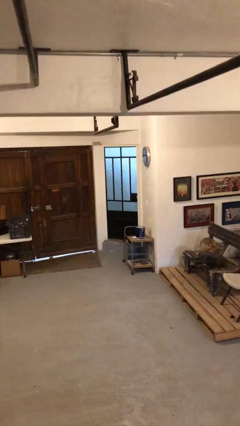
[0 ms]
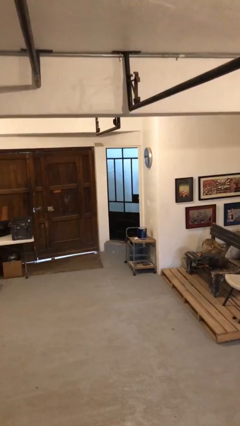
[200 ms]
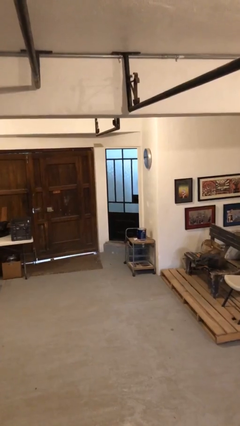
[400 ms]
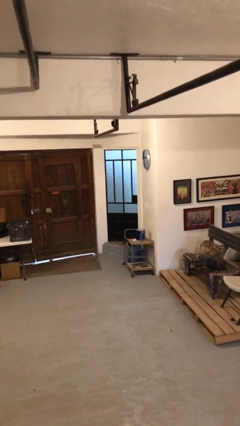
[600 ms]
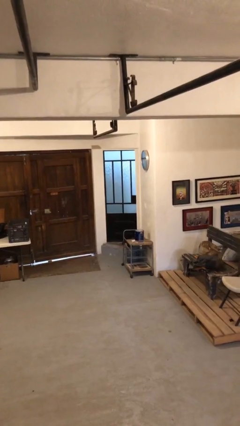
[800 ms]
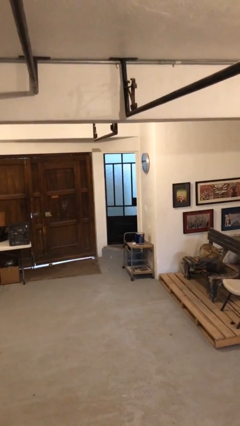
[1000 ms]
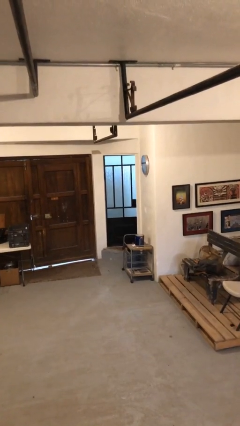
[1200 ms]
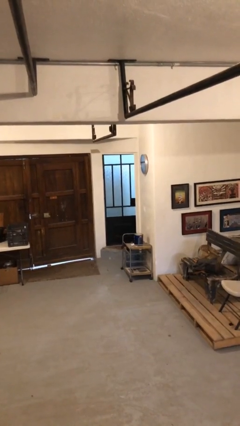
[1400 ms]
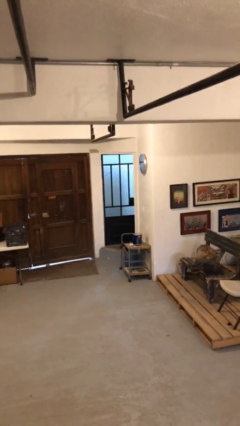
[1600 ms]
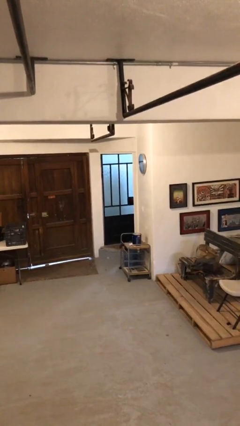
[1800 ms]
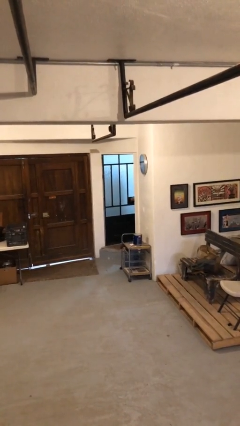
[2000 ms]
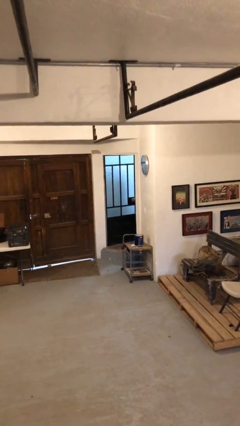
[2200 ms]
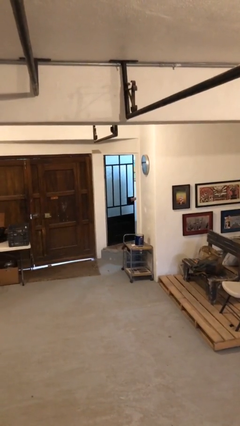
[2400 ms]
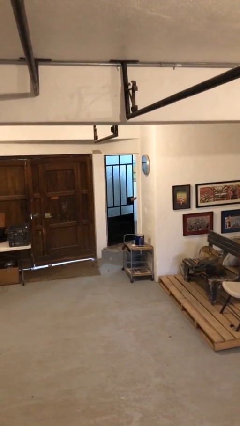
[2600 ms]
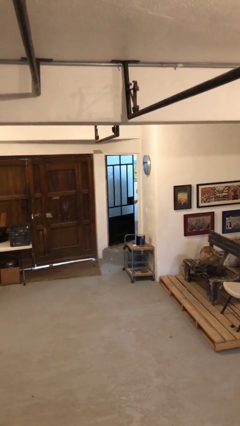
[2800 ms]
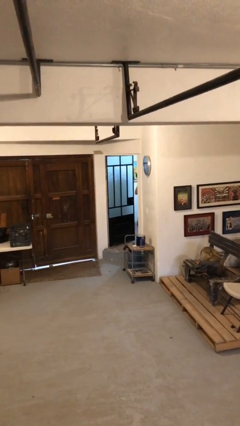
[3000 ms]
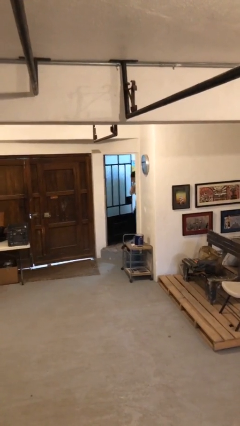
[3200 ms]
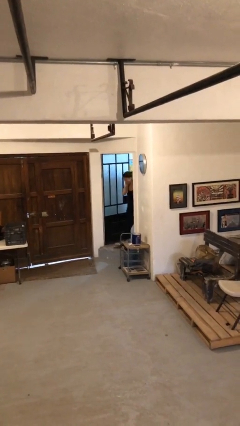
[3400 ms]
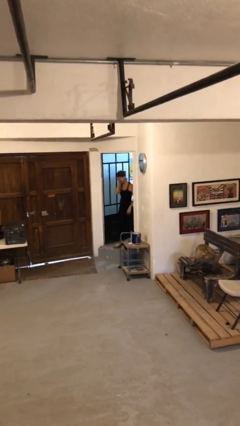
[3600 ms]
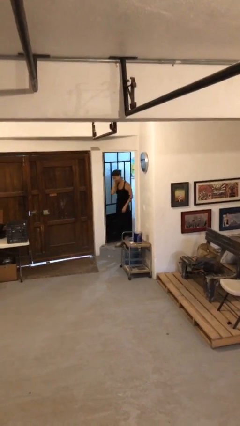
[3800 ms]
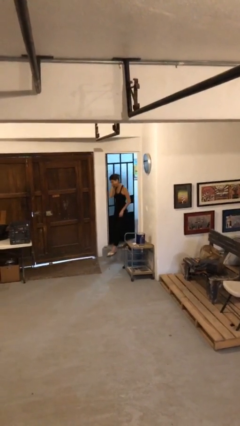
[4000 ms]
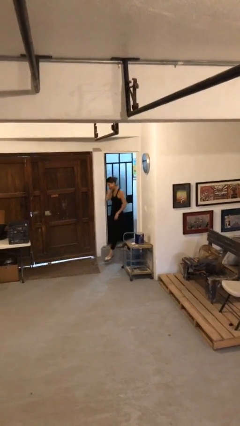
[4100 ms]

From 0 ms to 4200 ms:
person opens facility door

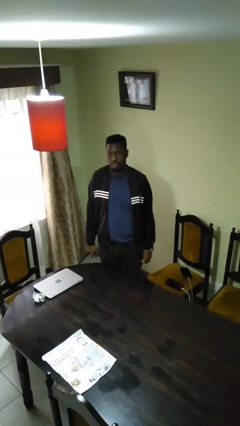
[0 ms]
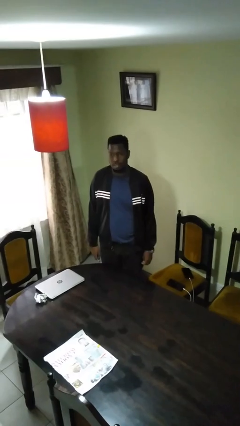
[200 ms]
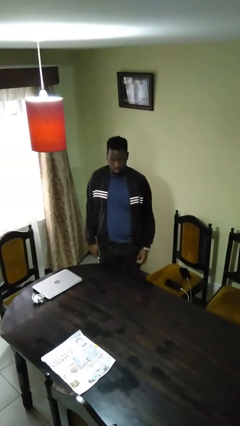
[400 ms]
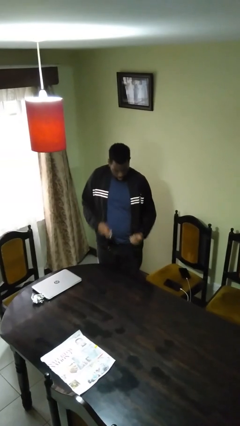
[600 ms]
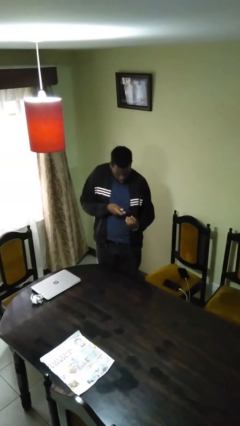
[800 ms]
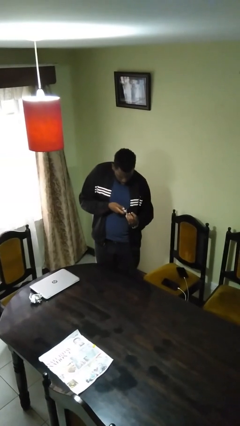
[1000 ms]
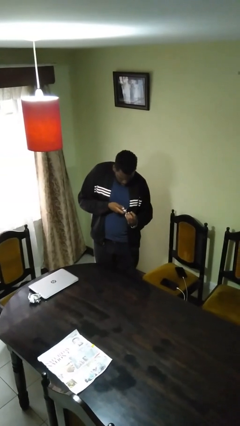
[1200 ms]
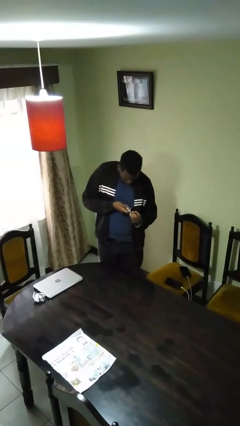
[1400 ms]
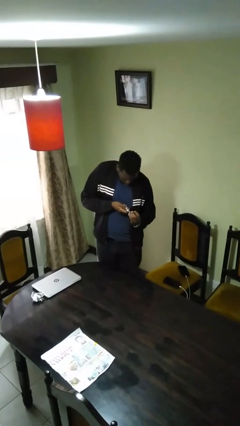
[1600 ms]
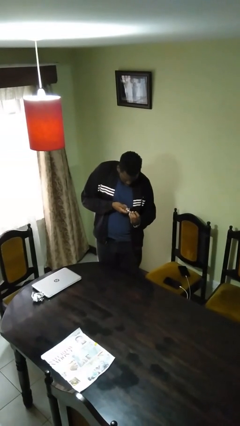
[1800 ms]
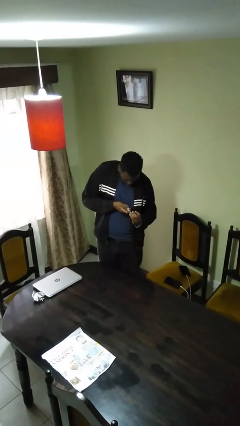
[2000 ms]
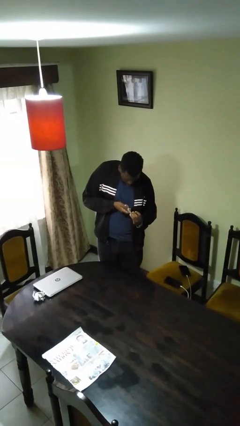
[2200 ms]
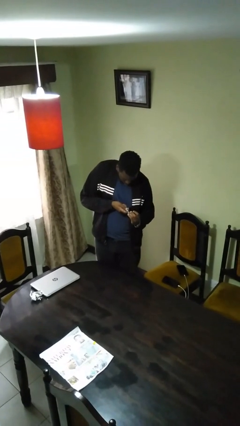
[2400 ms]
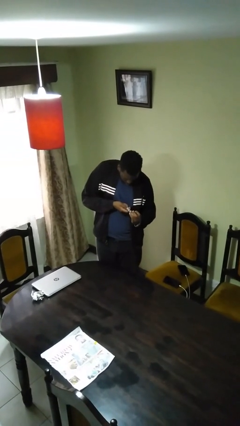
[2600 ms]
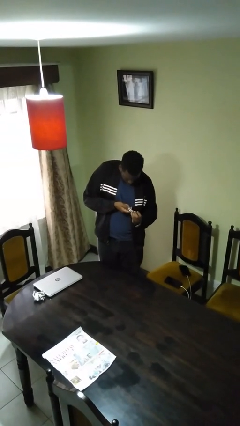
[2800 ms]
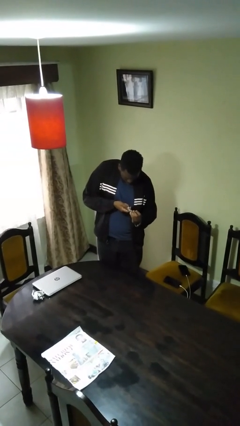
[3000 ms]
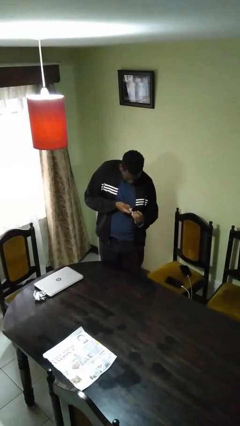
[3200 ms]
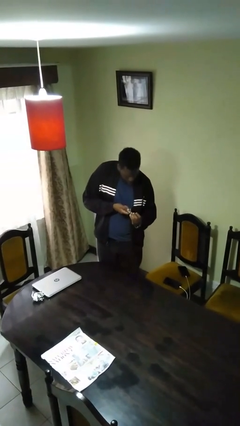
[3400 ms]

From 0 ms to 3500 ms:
person clips fingernails

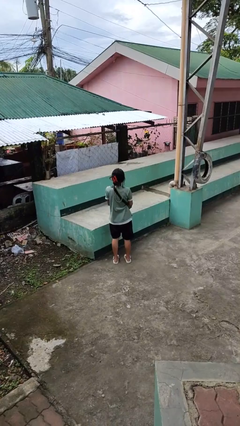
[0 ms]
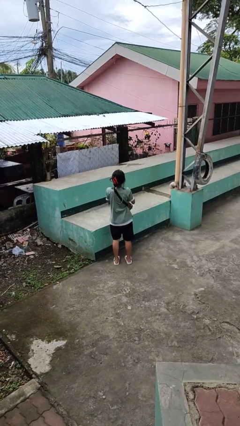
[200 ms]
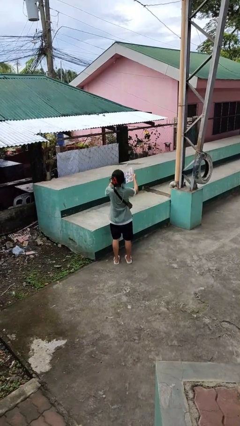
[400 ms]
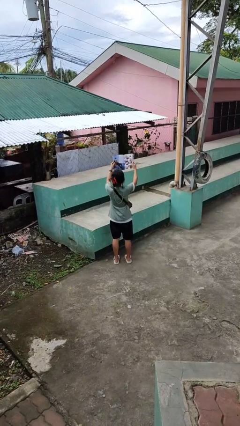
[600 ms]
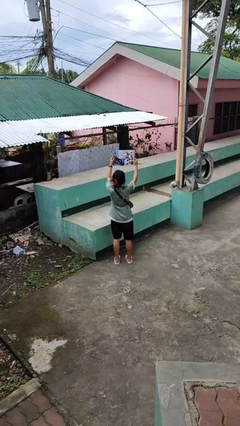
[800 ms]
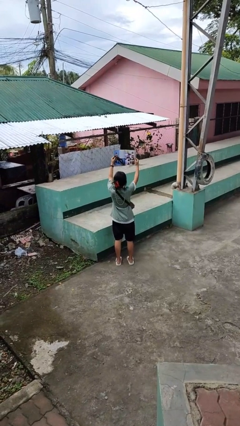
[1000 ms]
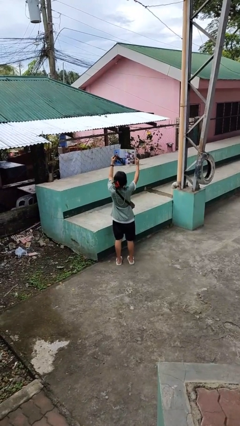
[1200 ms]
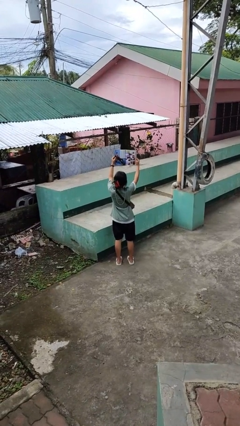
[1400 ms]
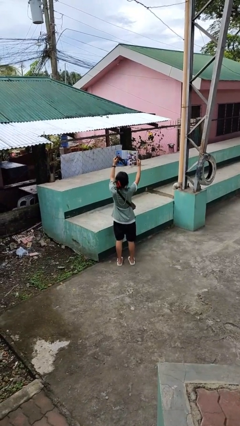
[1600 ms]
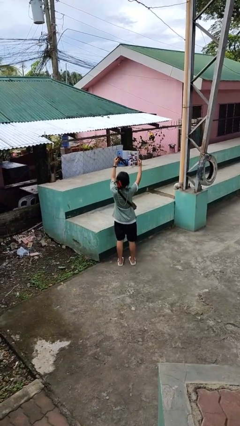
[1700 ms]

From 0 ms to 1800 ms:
person reads magazine

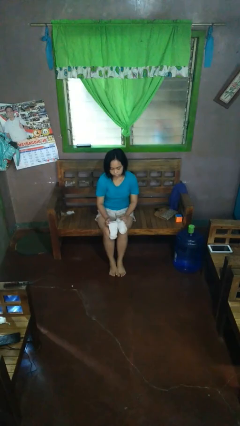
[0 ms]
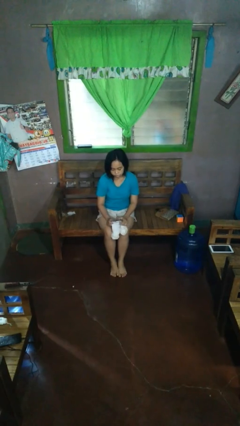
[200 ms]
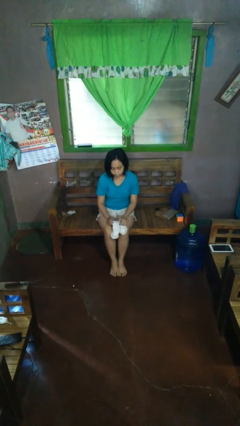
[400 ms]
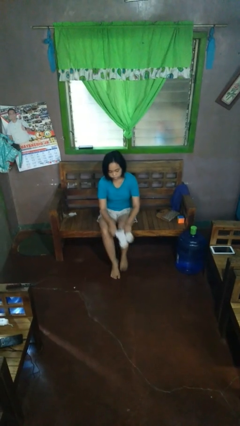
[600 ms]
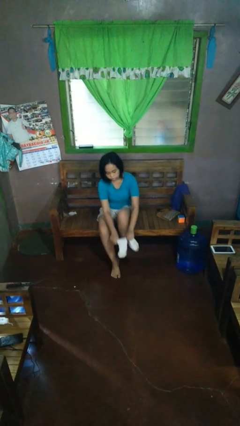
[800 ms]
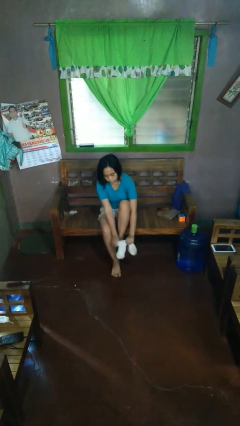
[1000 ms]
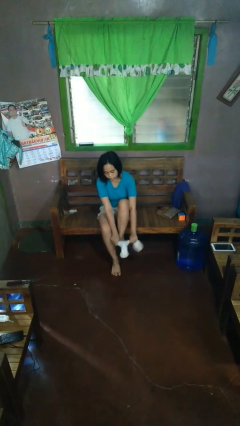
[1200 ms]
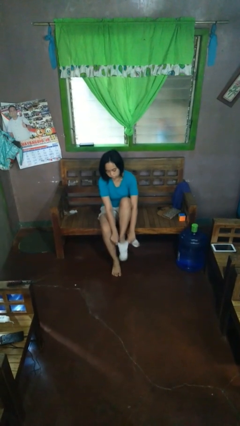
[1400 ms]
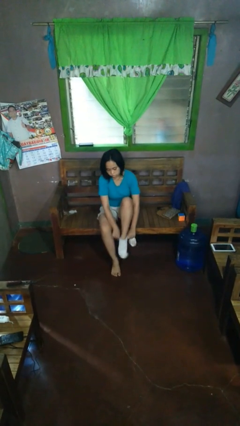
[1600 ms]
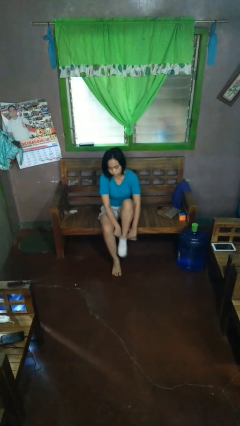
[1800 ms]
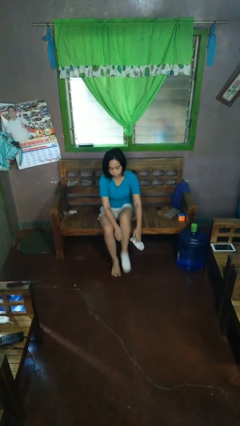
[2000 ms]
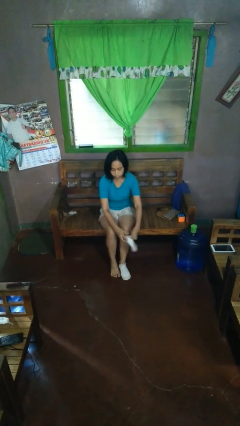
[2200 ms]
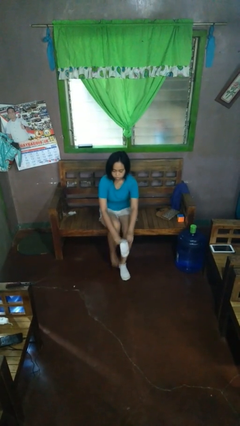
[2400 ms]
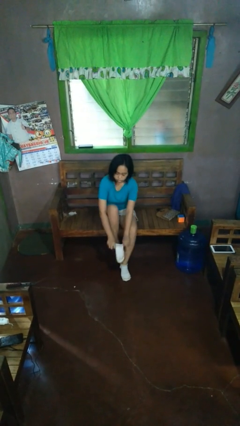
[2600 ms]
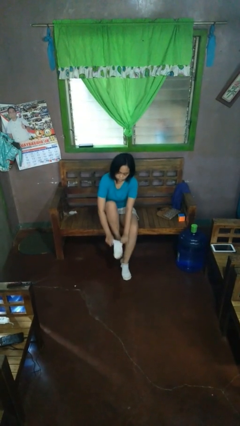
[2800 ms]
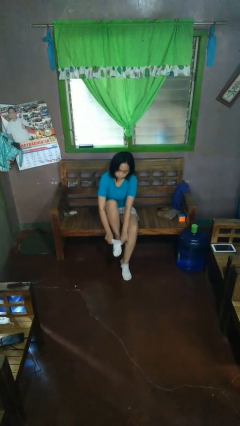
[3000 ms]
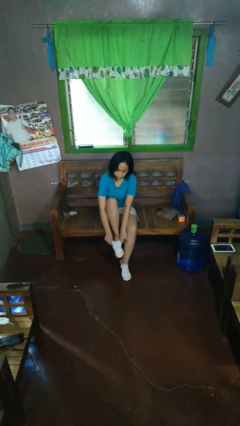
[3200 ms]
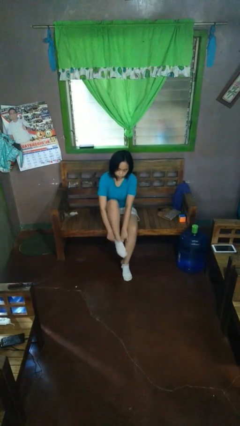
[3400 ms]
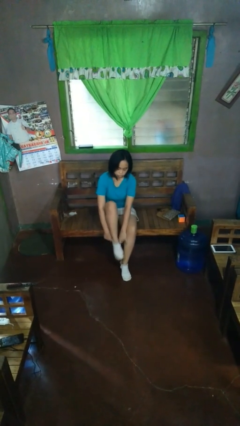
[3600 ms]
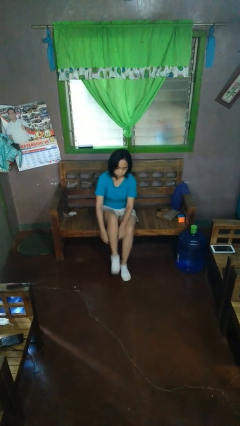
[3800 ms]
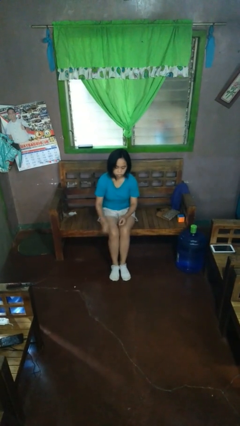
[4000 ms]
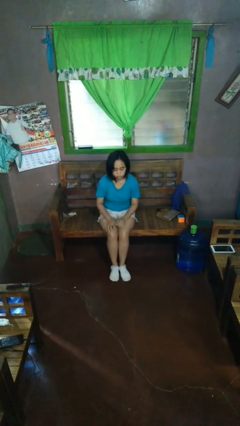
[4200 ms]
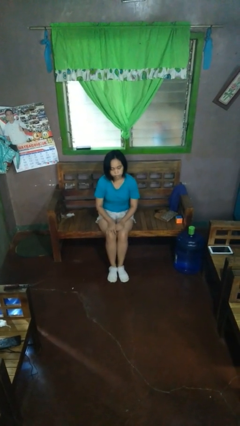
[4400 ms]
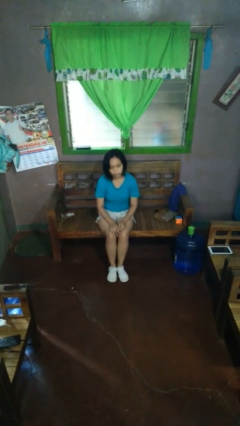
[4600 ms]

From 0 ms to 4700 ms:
person puts on socks

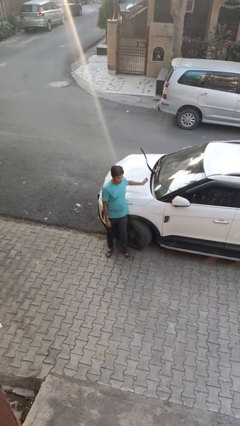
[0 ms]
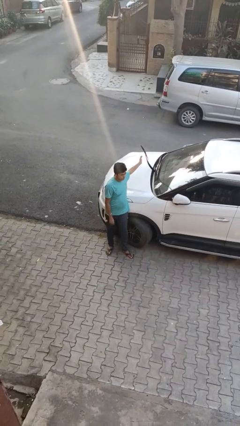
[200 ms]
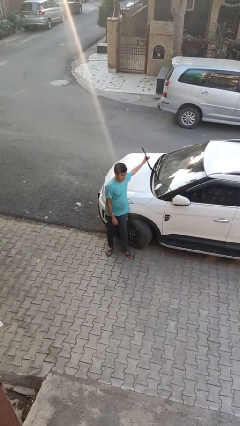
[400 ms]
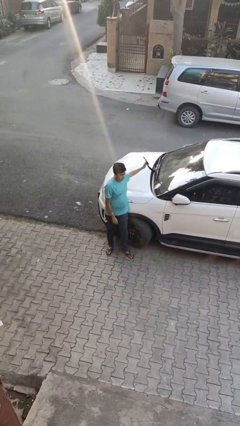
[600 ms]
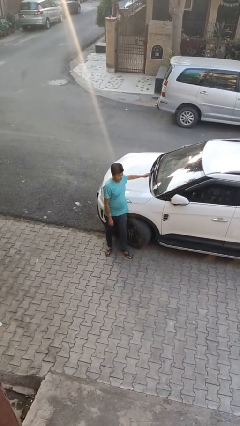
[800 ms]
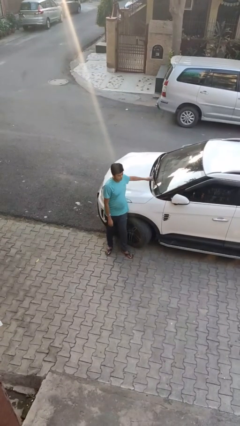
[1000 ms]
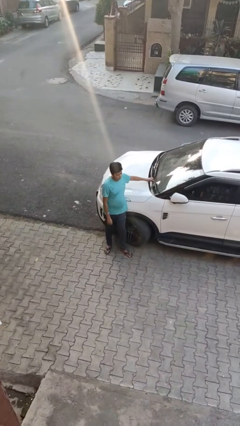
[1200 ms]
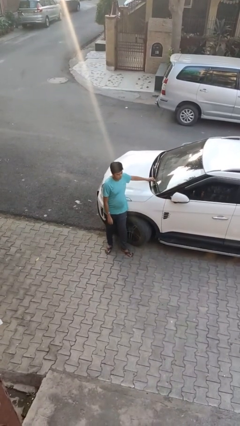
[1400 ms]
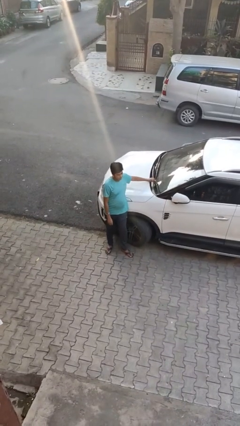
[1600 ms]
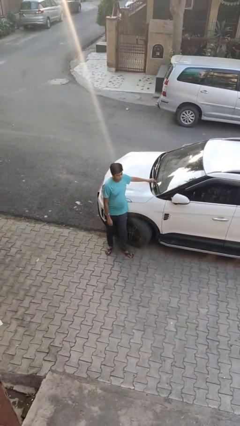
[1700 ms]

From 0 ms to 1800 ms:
person flips down car wipers

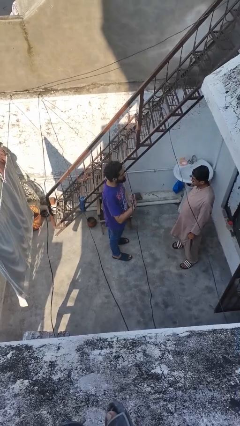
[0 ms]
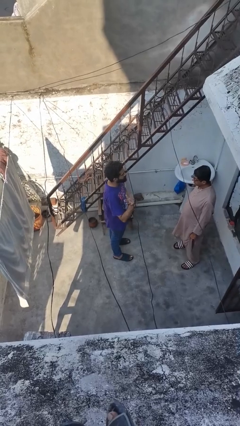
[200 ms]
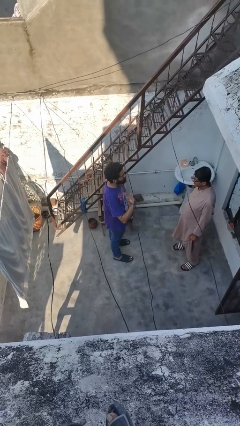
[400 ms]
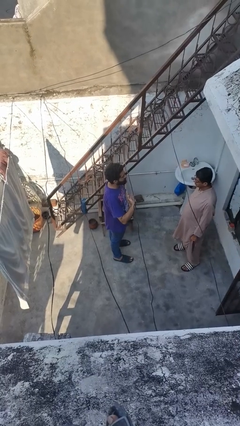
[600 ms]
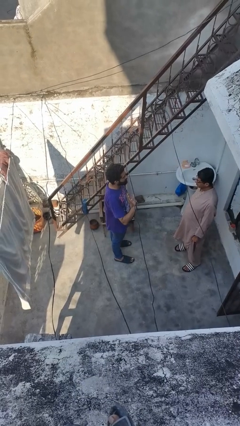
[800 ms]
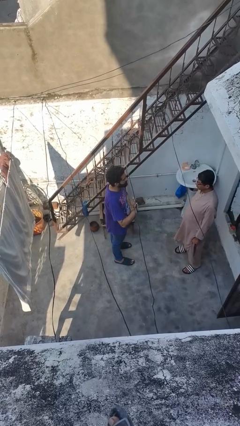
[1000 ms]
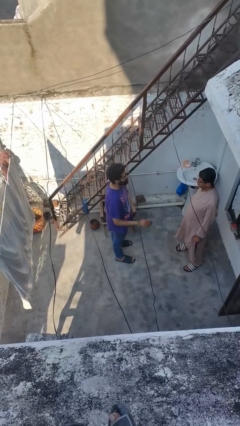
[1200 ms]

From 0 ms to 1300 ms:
person waves at person

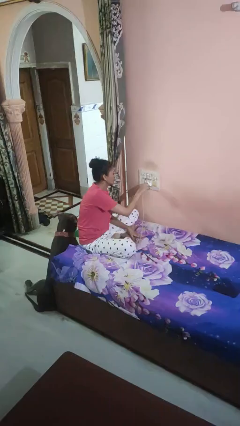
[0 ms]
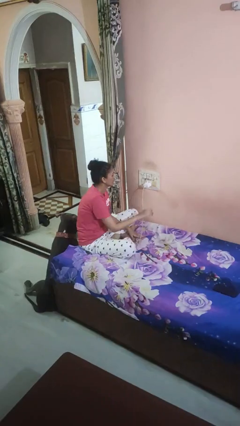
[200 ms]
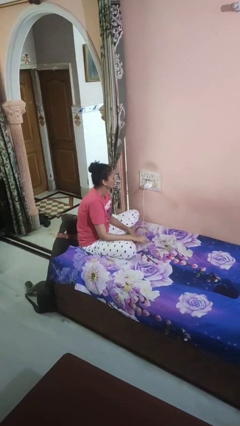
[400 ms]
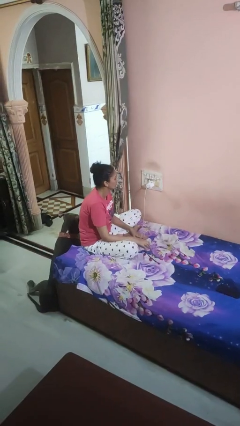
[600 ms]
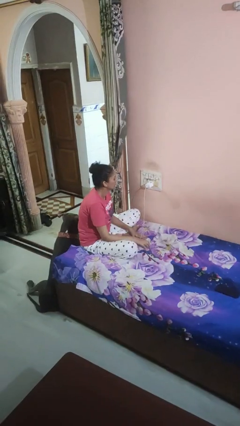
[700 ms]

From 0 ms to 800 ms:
person plugs into electrical socket
